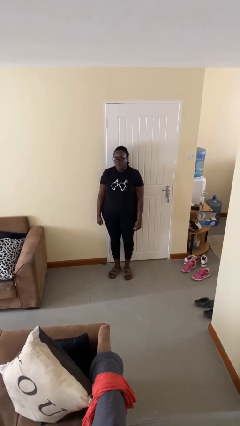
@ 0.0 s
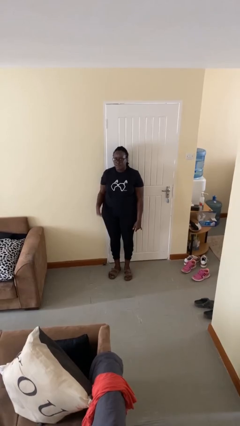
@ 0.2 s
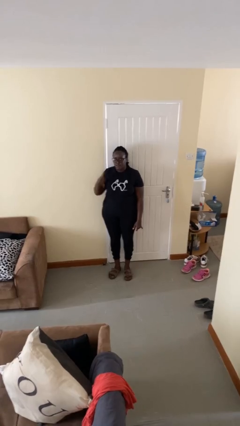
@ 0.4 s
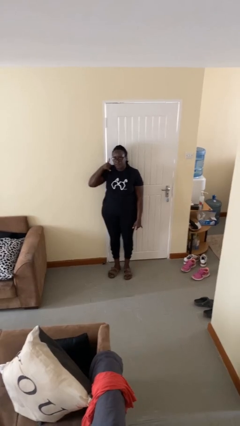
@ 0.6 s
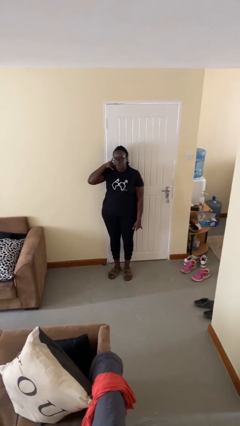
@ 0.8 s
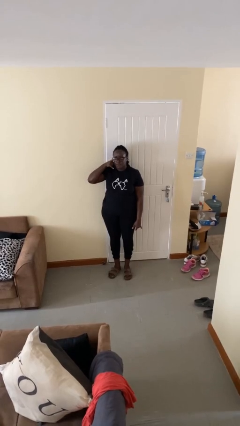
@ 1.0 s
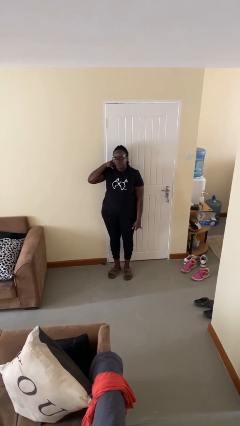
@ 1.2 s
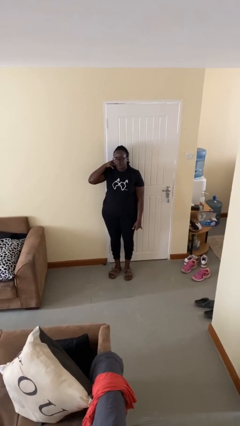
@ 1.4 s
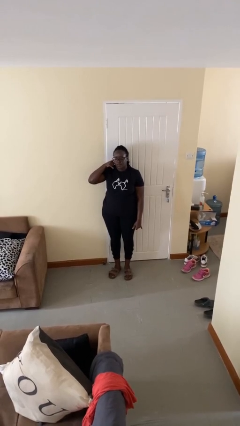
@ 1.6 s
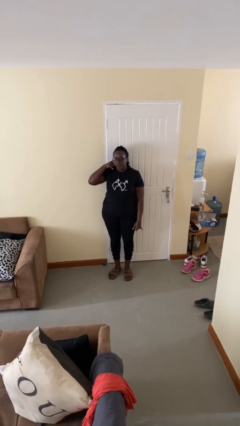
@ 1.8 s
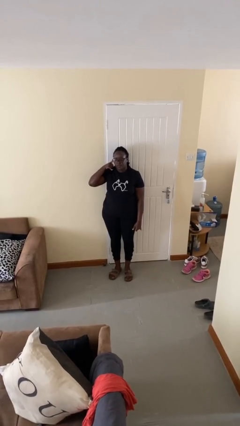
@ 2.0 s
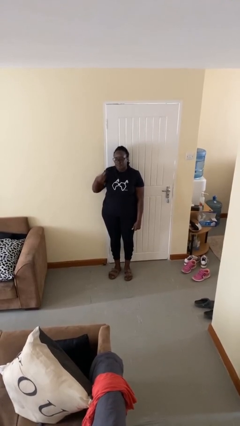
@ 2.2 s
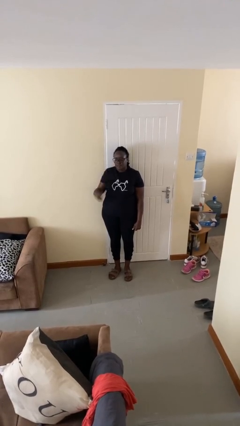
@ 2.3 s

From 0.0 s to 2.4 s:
person gestures call me

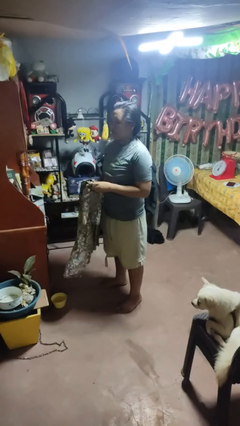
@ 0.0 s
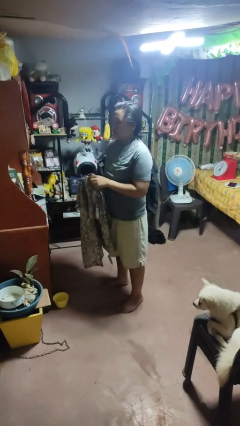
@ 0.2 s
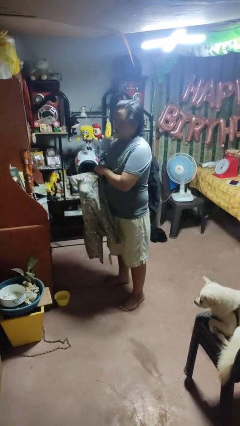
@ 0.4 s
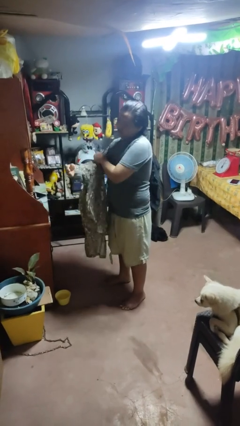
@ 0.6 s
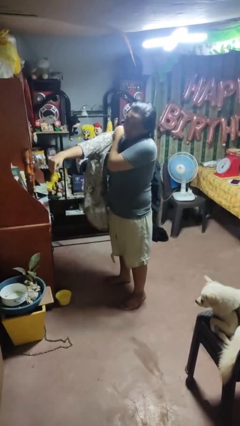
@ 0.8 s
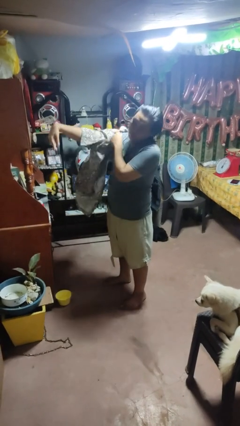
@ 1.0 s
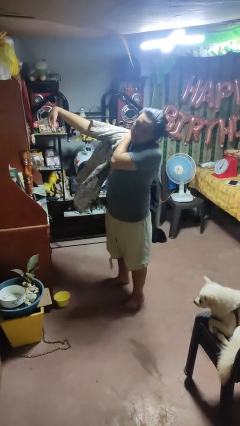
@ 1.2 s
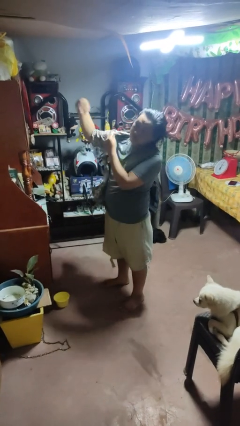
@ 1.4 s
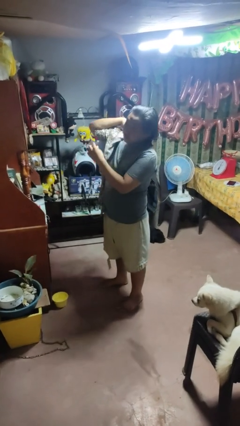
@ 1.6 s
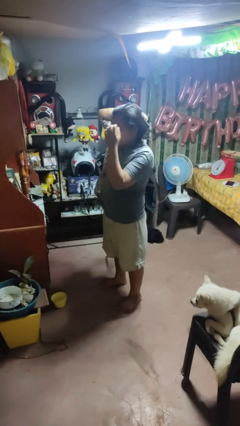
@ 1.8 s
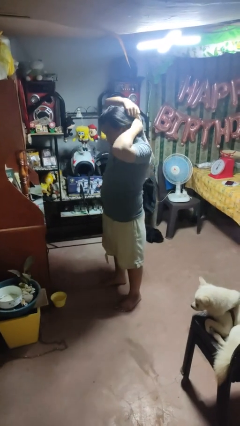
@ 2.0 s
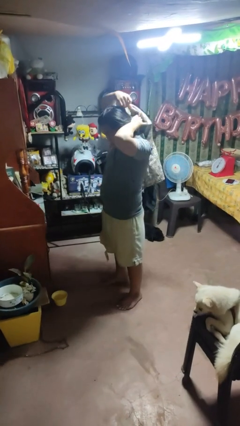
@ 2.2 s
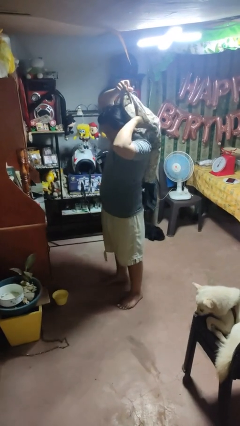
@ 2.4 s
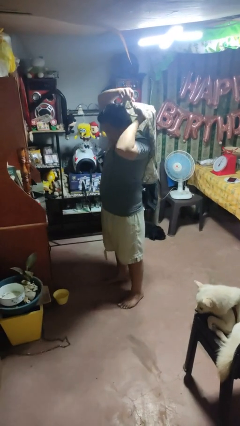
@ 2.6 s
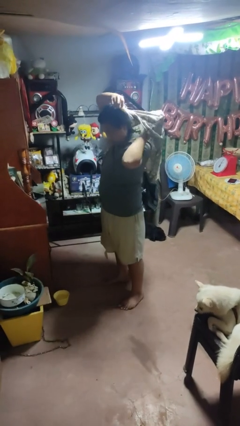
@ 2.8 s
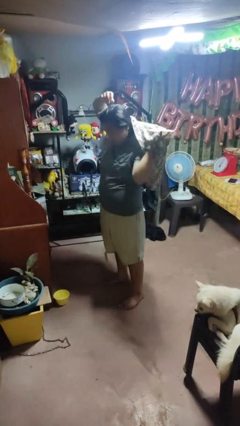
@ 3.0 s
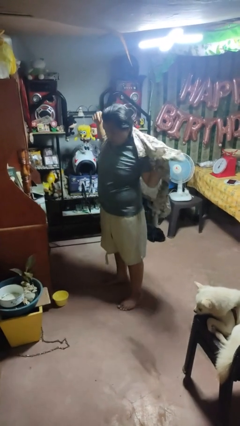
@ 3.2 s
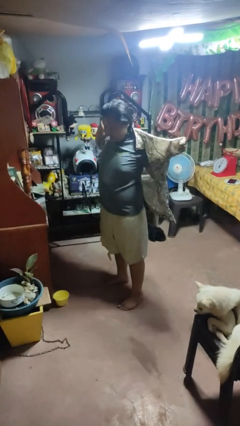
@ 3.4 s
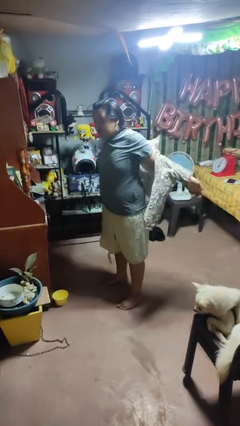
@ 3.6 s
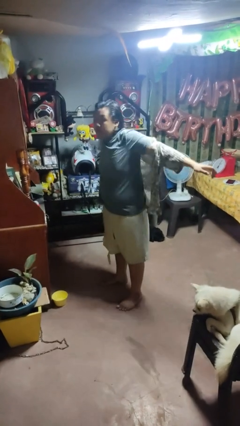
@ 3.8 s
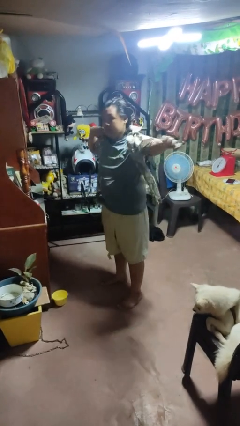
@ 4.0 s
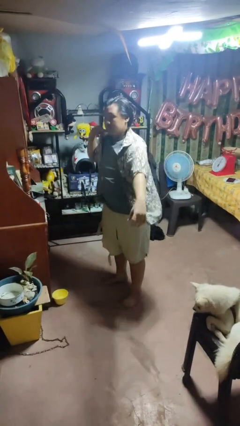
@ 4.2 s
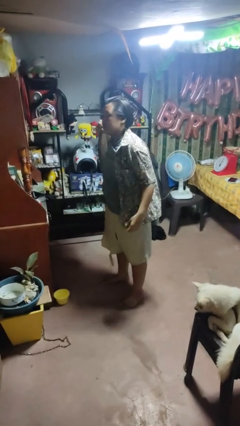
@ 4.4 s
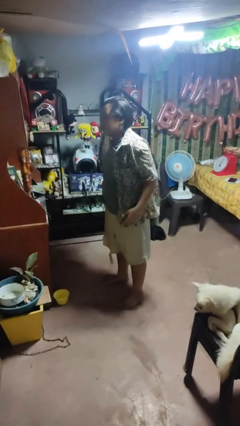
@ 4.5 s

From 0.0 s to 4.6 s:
person puts on shirt

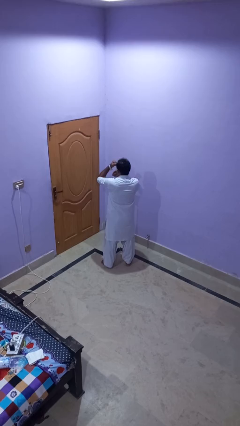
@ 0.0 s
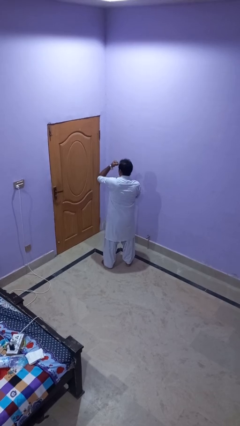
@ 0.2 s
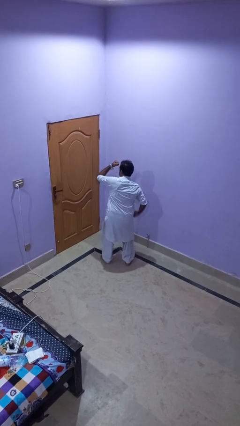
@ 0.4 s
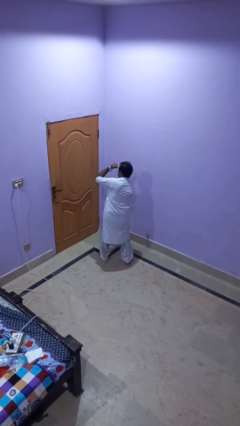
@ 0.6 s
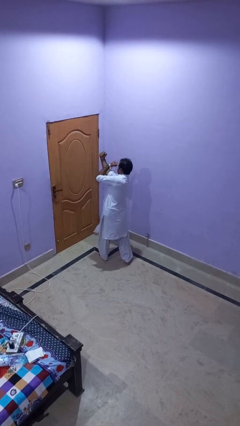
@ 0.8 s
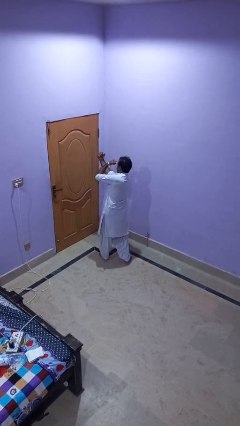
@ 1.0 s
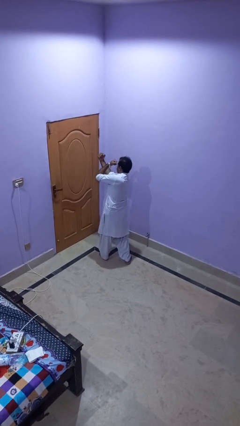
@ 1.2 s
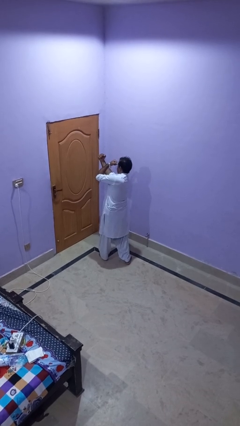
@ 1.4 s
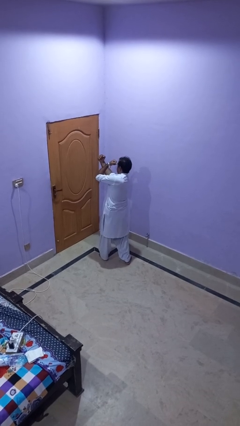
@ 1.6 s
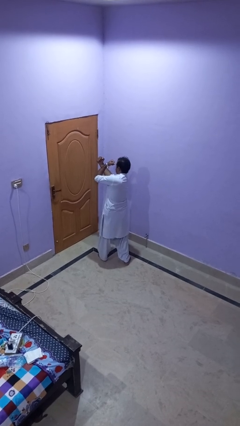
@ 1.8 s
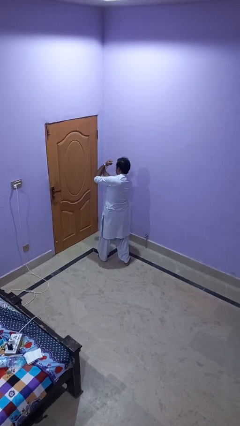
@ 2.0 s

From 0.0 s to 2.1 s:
person punches

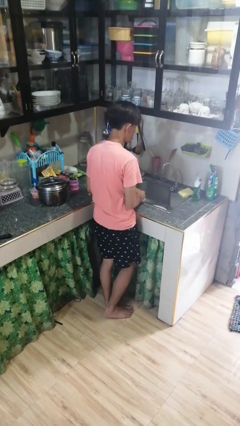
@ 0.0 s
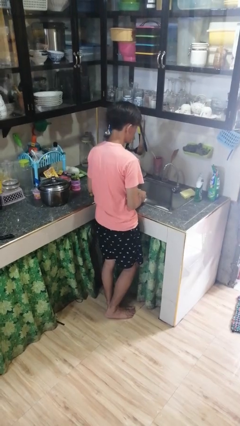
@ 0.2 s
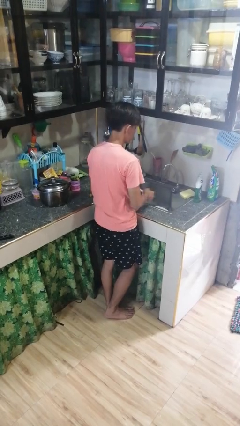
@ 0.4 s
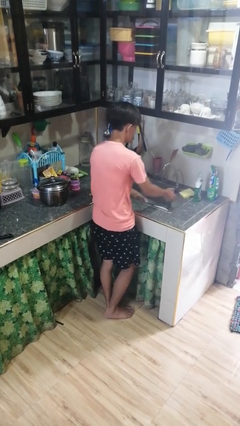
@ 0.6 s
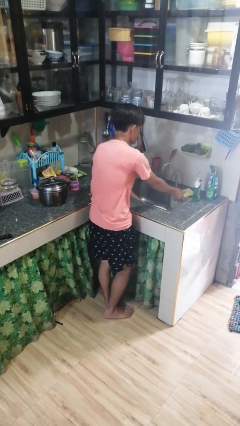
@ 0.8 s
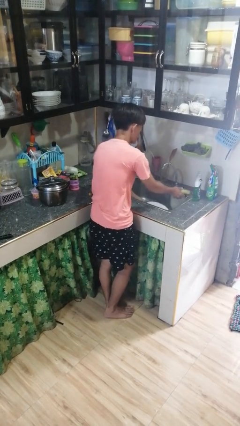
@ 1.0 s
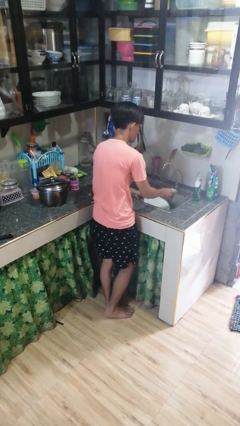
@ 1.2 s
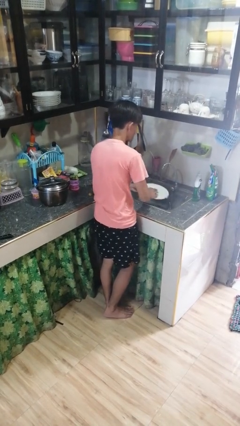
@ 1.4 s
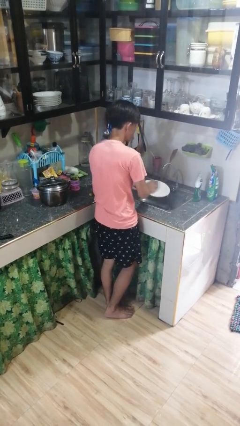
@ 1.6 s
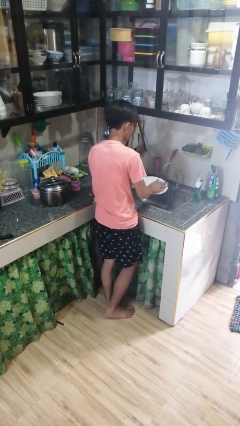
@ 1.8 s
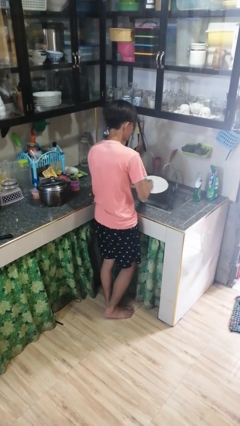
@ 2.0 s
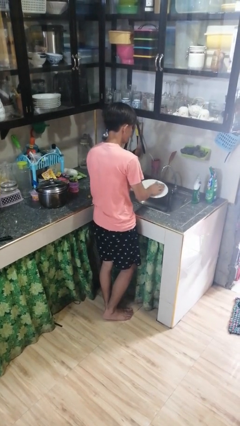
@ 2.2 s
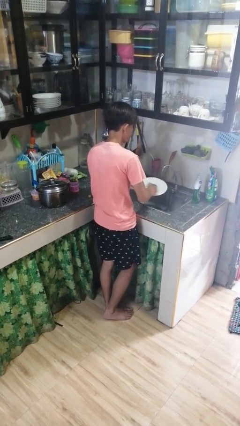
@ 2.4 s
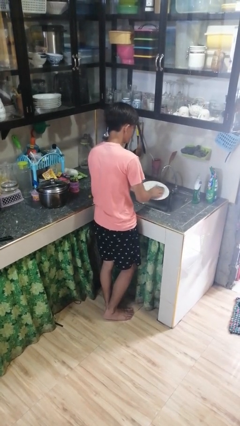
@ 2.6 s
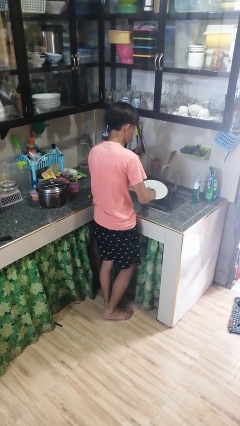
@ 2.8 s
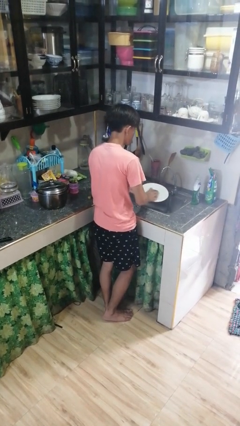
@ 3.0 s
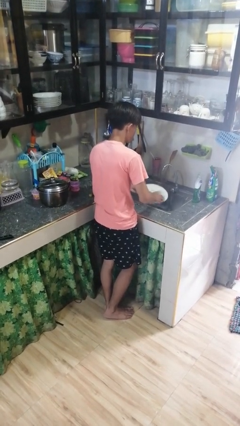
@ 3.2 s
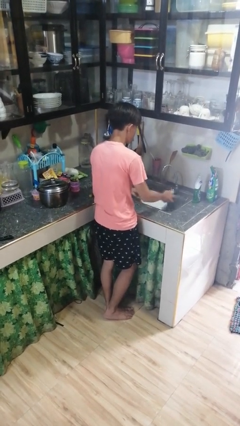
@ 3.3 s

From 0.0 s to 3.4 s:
person washes dish

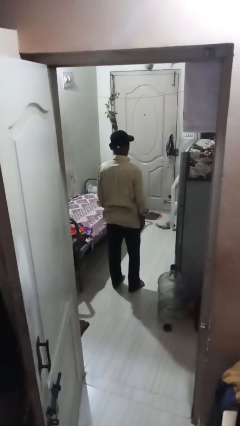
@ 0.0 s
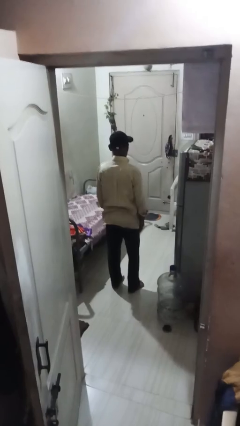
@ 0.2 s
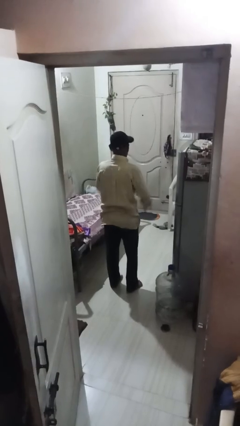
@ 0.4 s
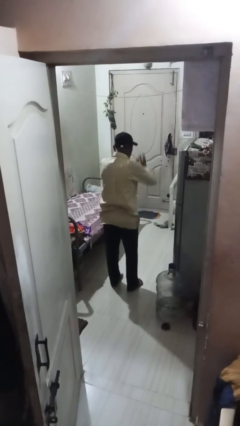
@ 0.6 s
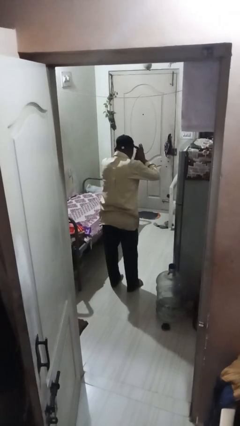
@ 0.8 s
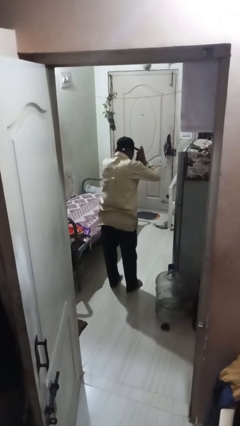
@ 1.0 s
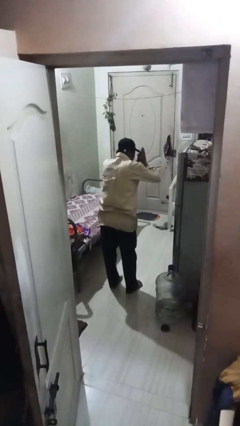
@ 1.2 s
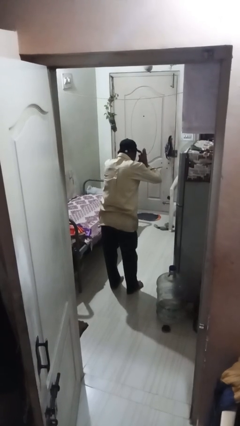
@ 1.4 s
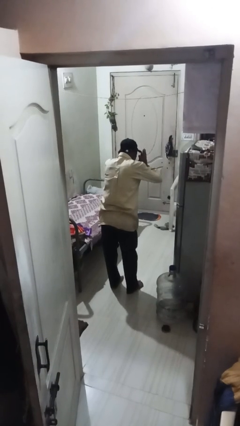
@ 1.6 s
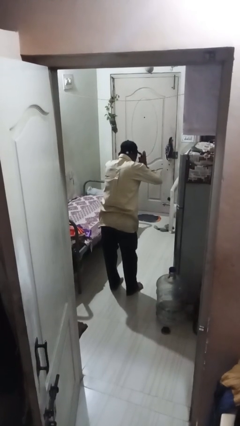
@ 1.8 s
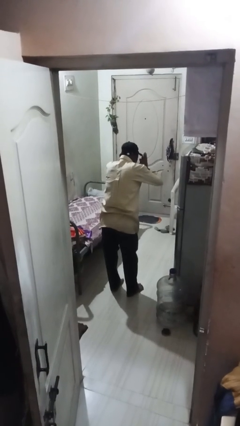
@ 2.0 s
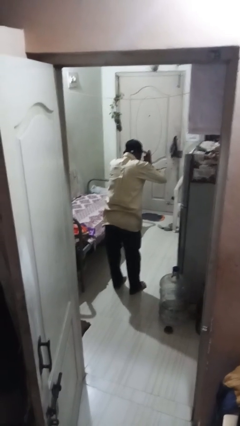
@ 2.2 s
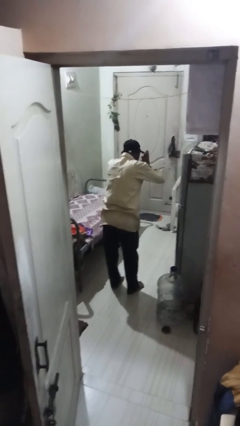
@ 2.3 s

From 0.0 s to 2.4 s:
person prays

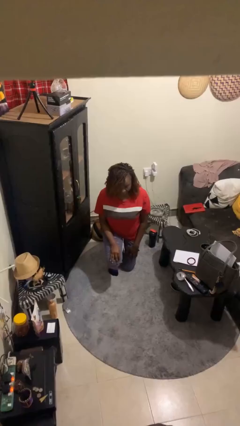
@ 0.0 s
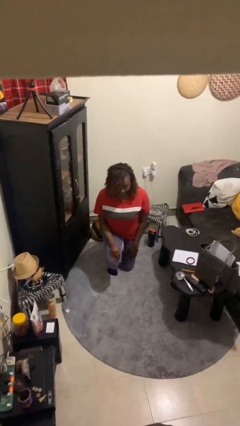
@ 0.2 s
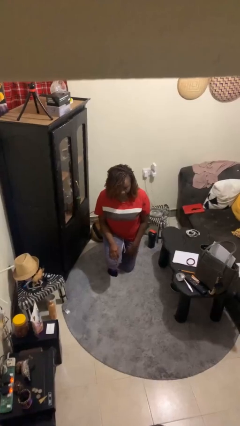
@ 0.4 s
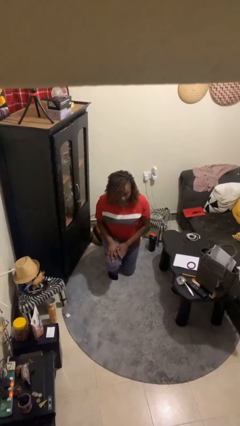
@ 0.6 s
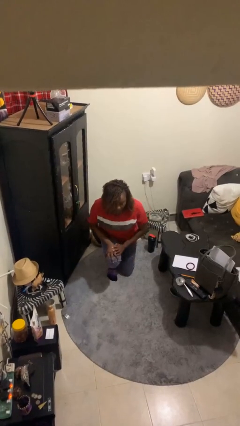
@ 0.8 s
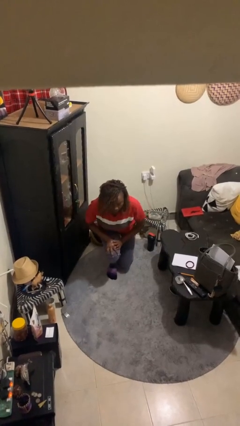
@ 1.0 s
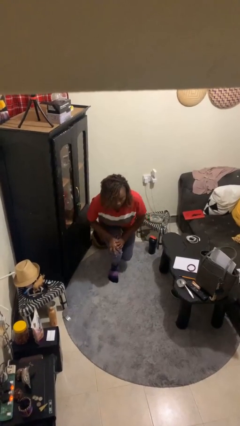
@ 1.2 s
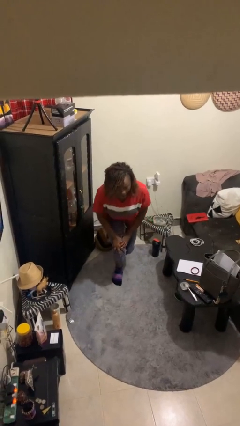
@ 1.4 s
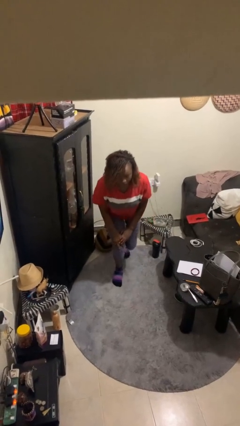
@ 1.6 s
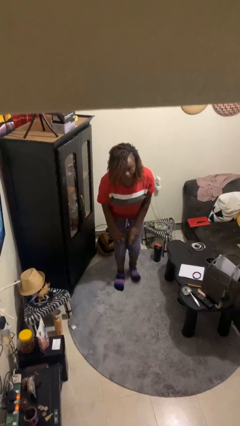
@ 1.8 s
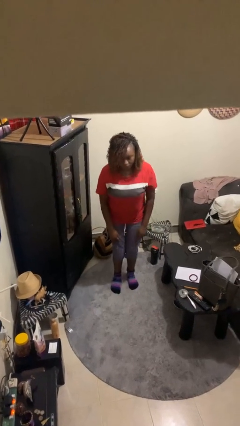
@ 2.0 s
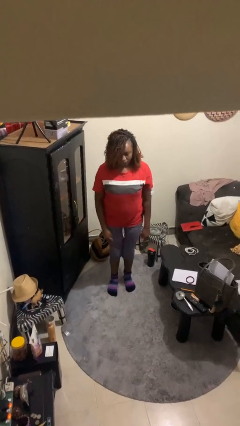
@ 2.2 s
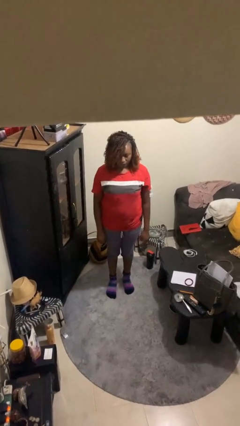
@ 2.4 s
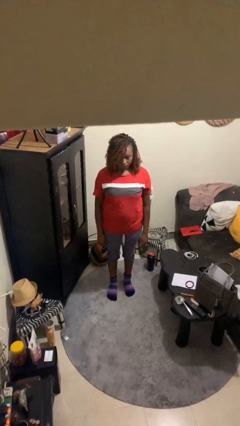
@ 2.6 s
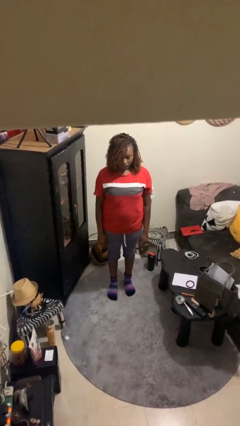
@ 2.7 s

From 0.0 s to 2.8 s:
person stands up from floor
